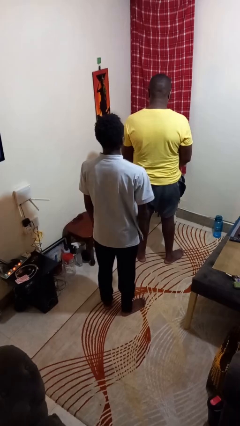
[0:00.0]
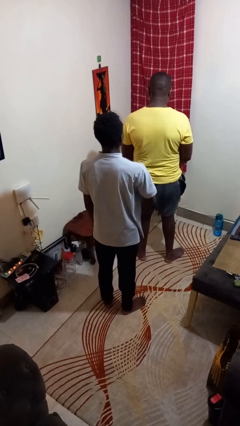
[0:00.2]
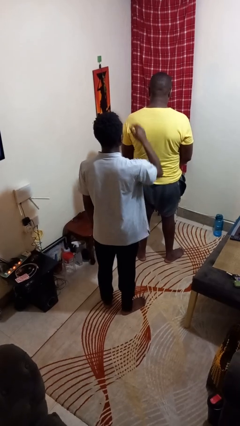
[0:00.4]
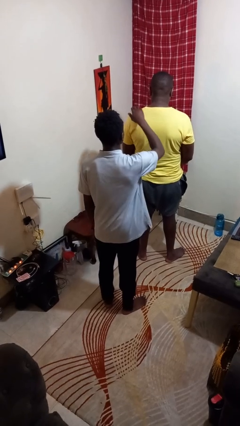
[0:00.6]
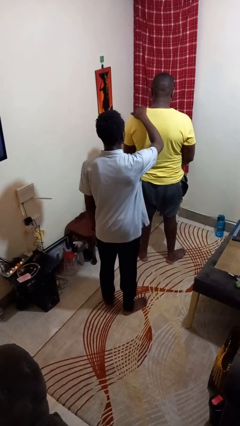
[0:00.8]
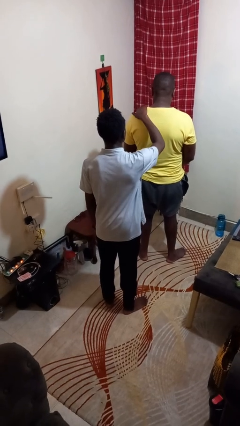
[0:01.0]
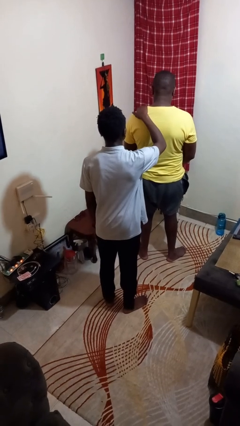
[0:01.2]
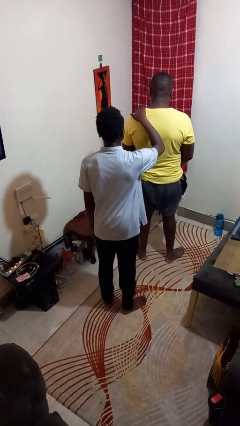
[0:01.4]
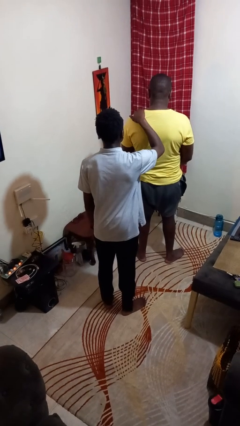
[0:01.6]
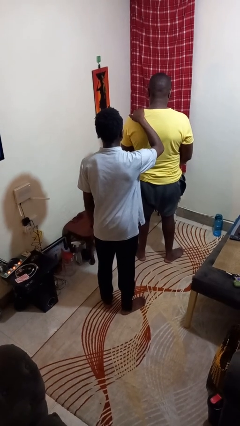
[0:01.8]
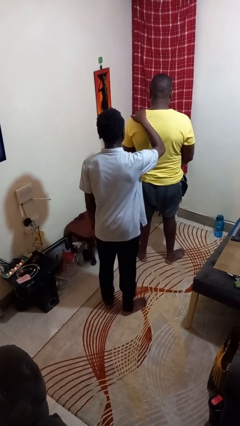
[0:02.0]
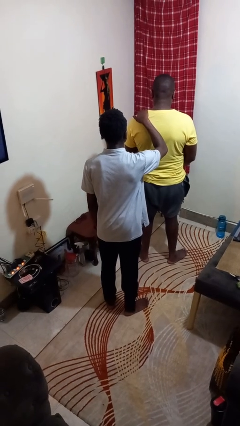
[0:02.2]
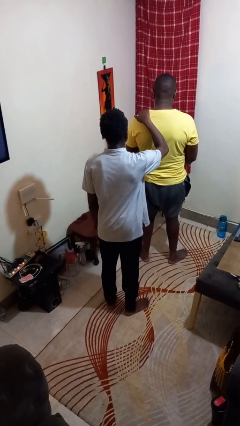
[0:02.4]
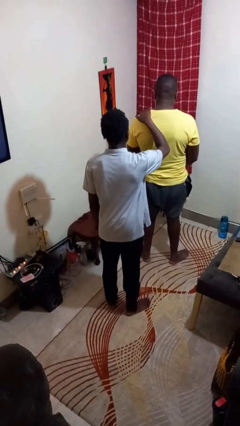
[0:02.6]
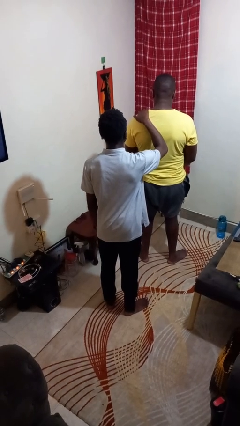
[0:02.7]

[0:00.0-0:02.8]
person touches back of person

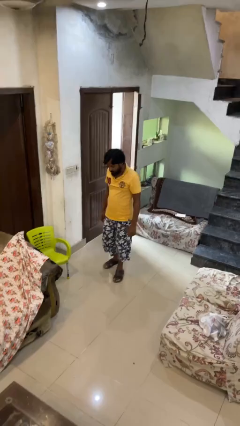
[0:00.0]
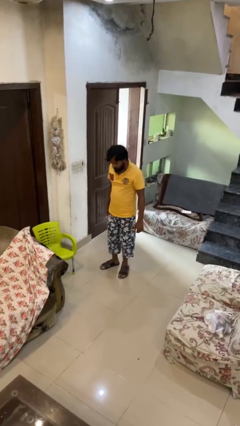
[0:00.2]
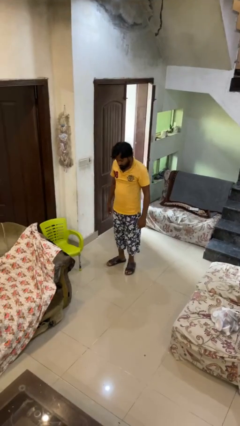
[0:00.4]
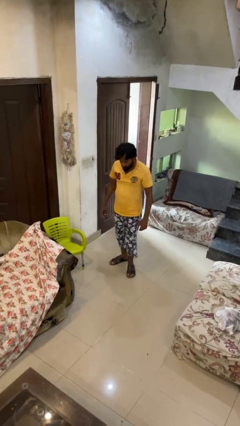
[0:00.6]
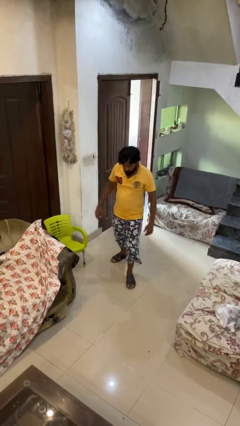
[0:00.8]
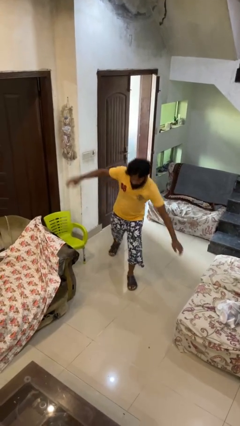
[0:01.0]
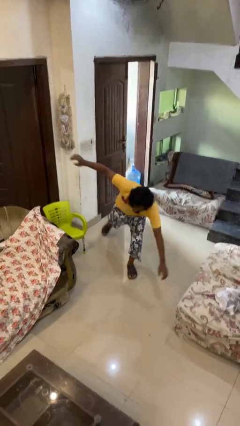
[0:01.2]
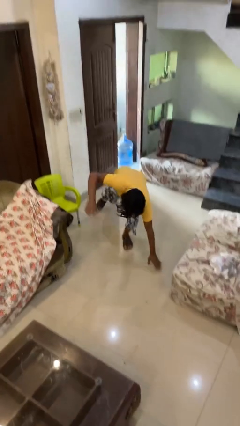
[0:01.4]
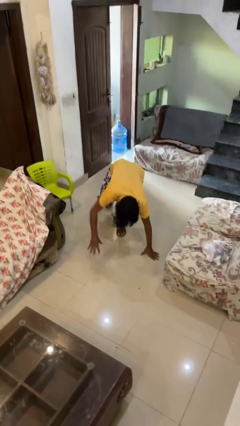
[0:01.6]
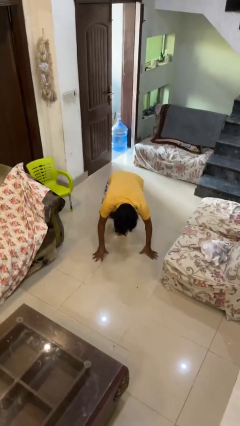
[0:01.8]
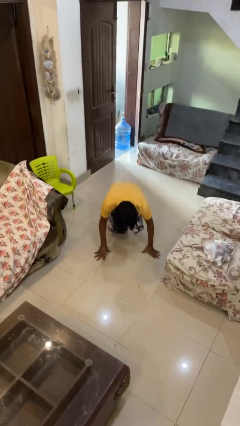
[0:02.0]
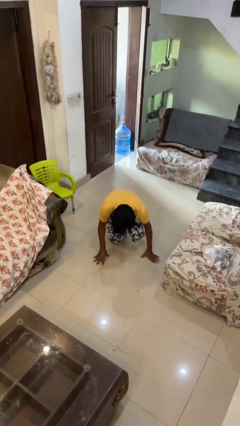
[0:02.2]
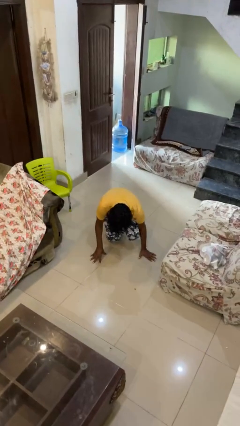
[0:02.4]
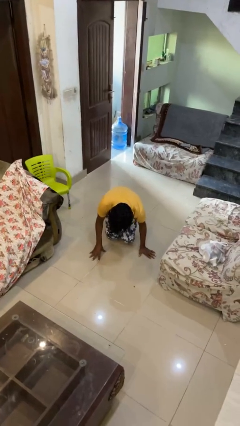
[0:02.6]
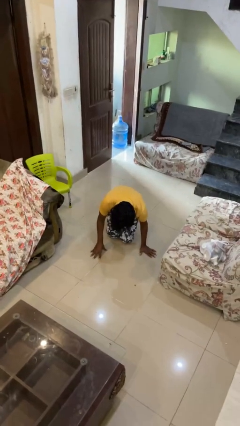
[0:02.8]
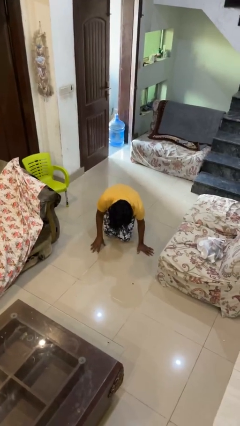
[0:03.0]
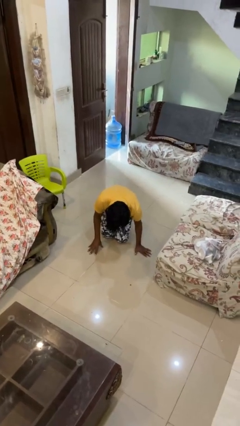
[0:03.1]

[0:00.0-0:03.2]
person trips on object on floor

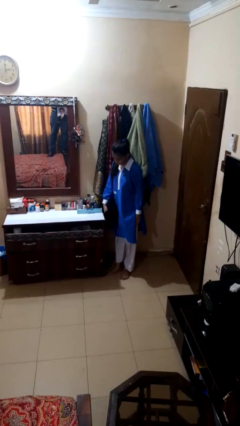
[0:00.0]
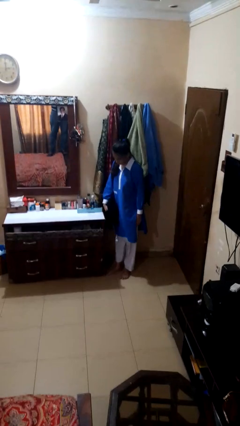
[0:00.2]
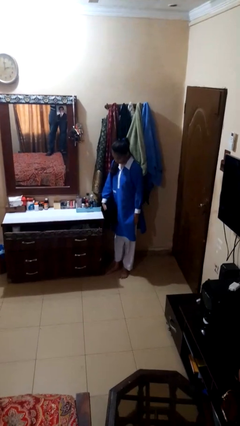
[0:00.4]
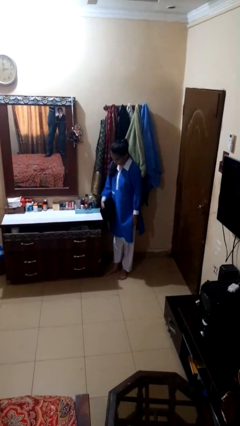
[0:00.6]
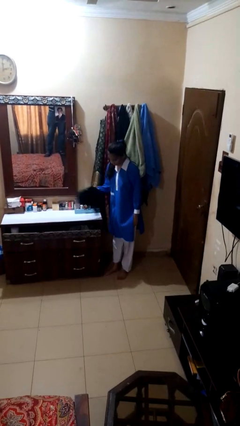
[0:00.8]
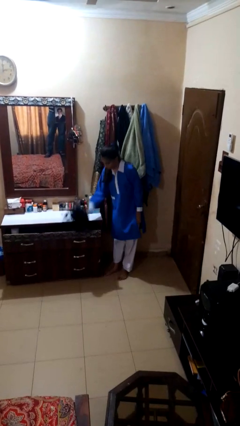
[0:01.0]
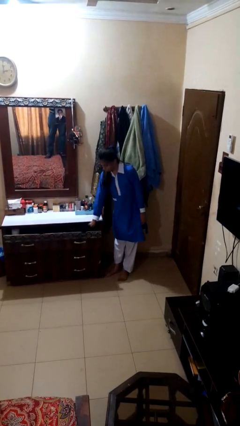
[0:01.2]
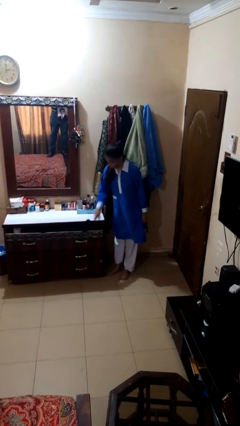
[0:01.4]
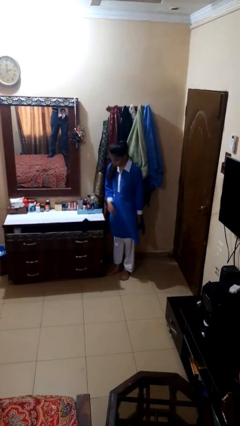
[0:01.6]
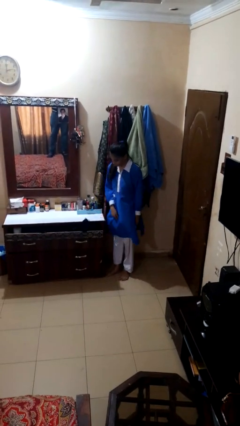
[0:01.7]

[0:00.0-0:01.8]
person puts clothes into dresser

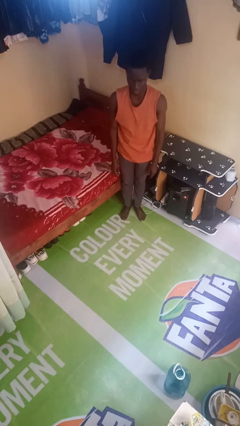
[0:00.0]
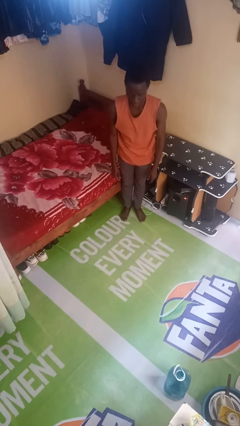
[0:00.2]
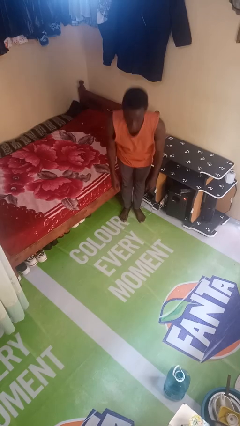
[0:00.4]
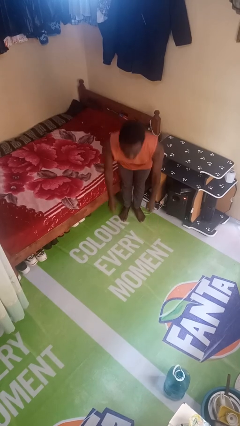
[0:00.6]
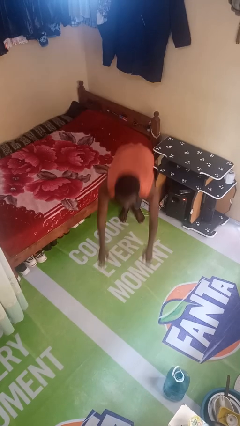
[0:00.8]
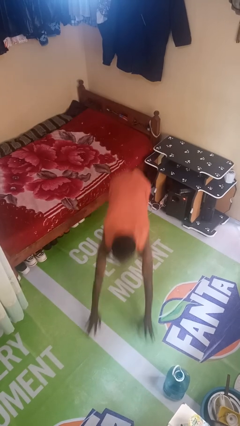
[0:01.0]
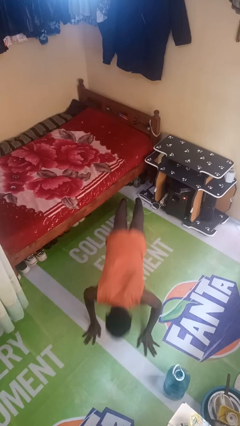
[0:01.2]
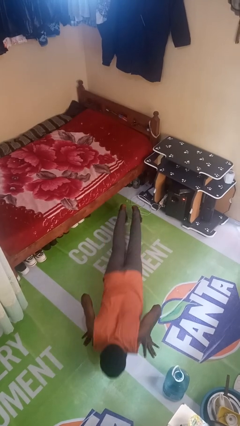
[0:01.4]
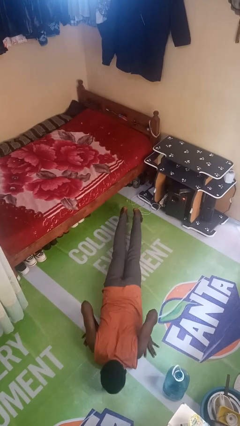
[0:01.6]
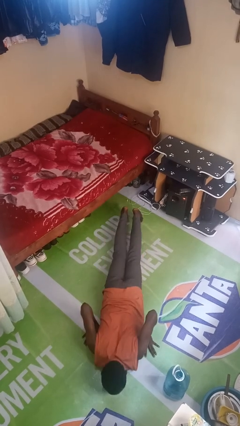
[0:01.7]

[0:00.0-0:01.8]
person falls while standing

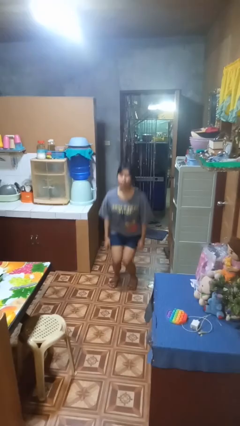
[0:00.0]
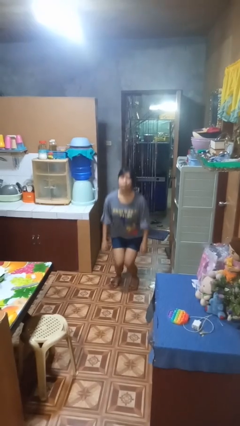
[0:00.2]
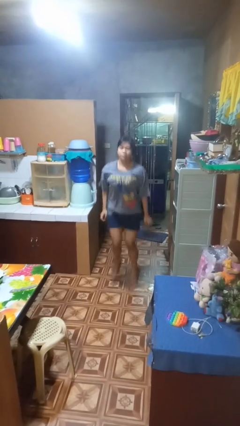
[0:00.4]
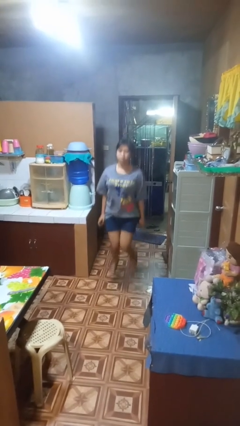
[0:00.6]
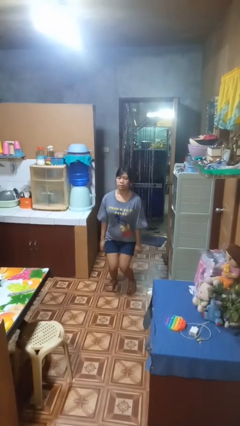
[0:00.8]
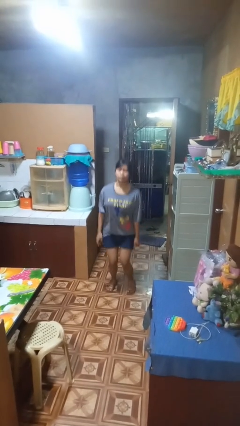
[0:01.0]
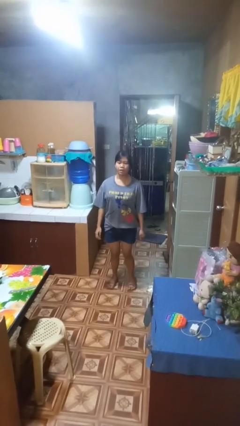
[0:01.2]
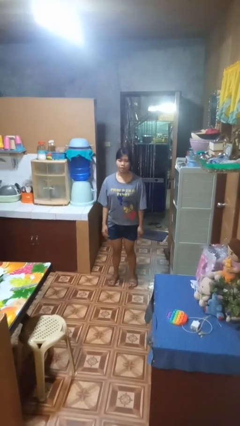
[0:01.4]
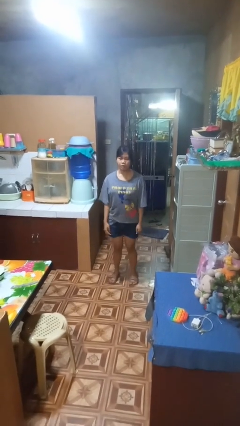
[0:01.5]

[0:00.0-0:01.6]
person jumps

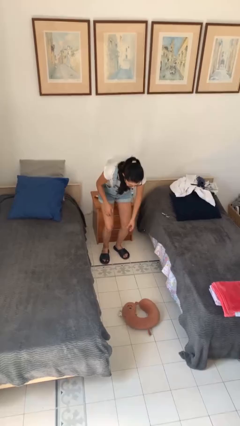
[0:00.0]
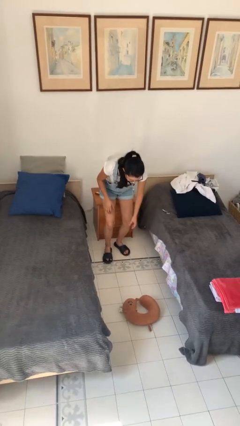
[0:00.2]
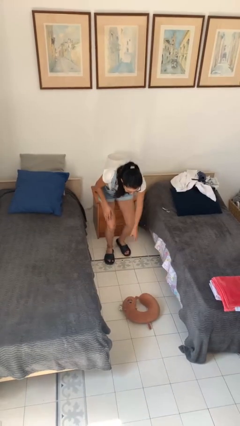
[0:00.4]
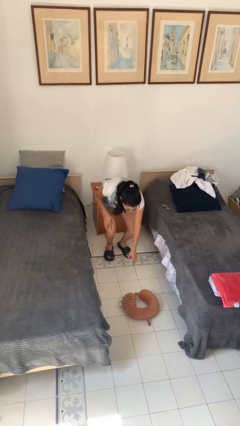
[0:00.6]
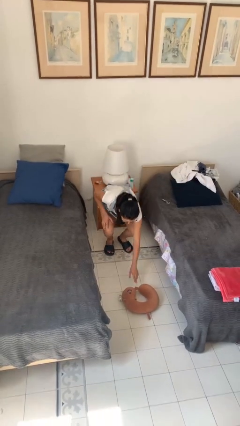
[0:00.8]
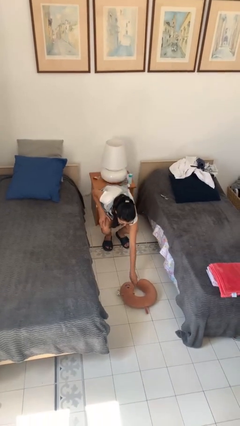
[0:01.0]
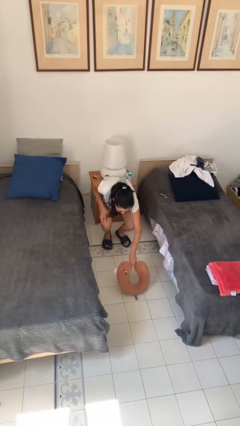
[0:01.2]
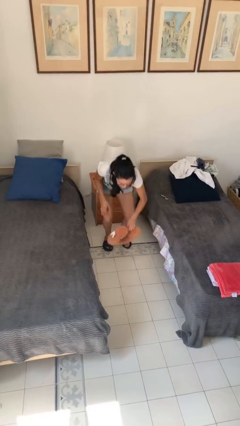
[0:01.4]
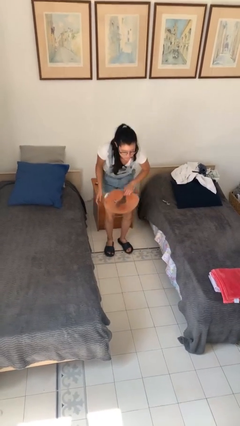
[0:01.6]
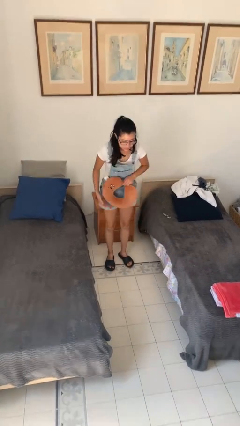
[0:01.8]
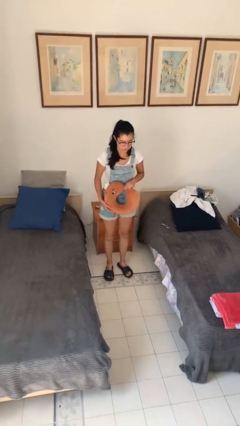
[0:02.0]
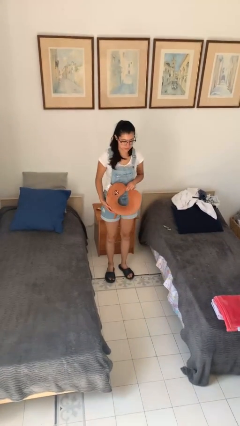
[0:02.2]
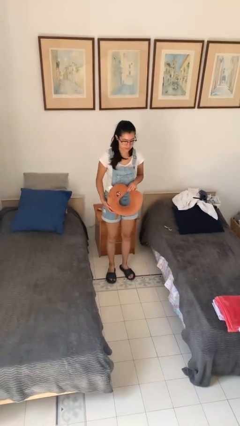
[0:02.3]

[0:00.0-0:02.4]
person picks up object from floor

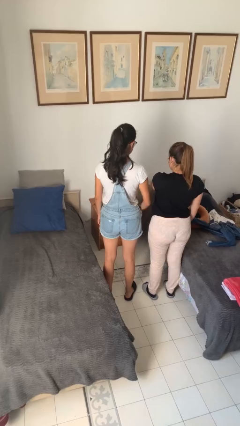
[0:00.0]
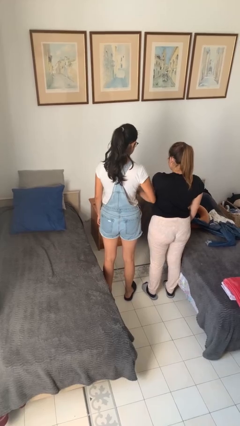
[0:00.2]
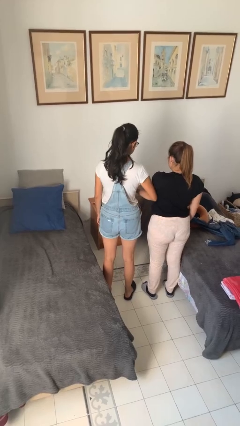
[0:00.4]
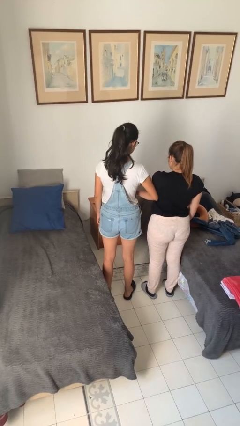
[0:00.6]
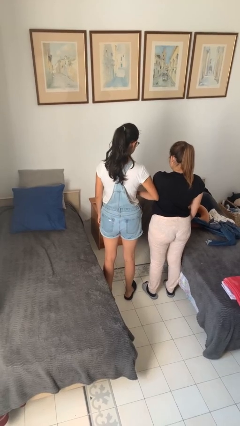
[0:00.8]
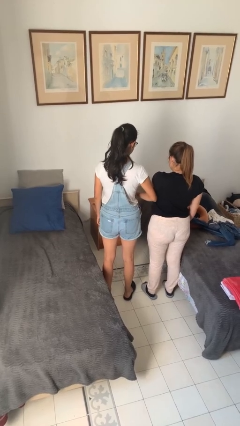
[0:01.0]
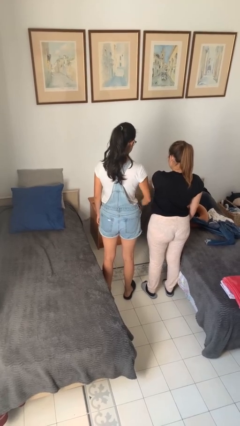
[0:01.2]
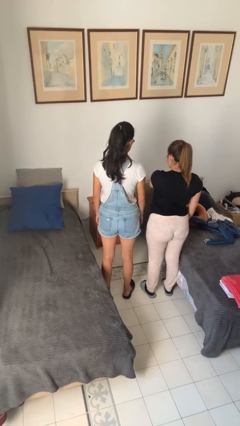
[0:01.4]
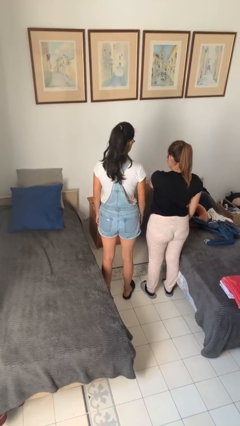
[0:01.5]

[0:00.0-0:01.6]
person nudges person with elbow

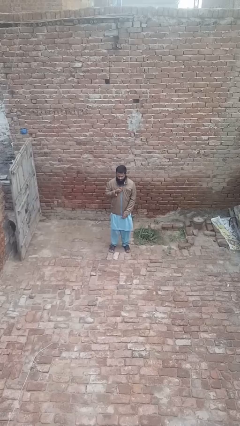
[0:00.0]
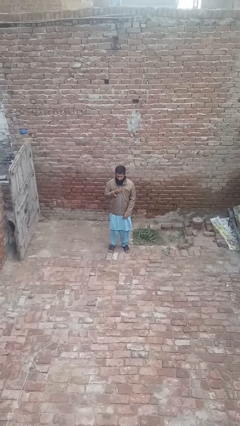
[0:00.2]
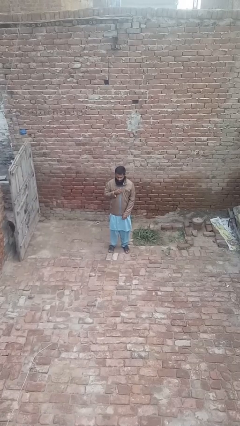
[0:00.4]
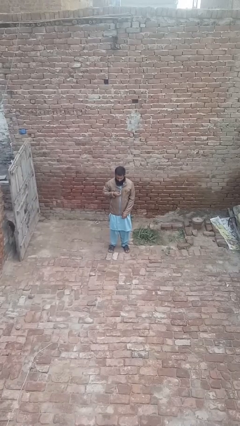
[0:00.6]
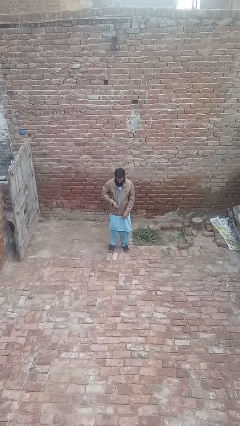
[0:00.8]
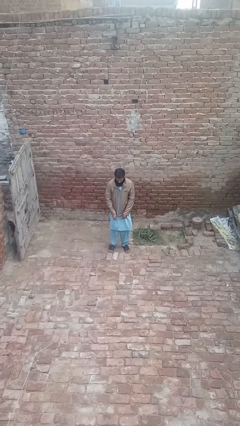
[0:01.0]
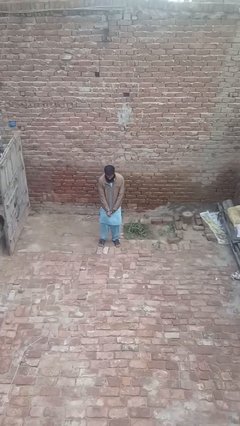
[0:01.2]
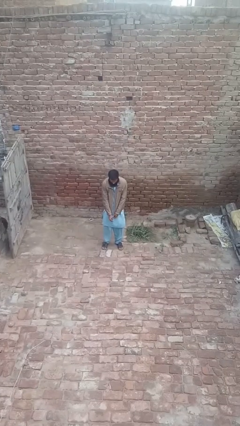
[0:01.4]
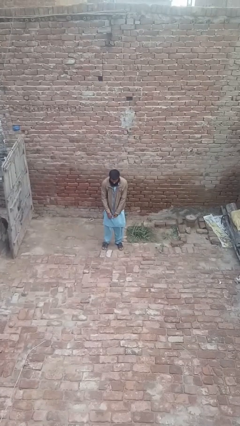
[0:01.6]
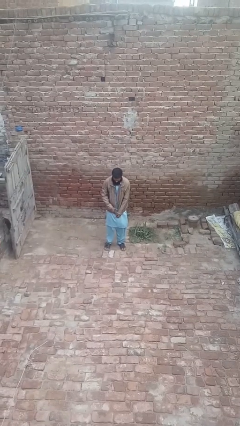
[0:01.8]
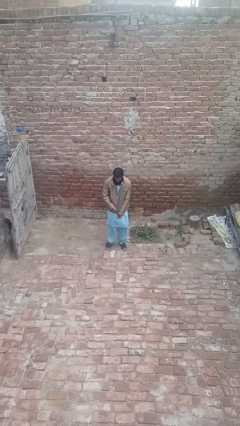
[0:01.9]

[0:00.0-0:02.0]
person unzips jacket

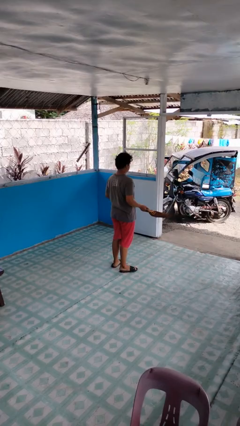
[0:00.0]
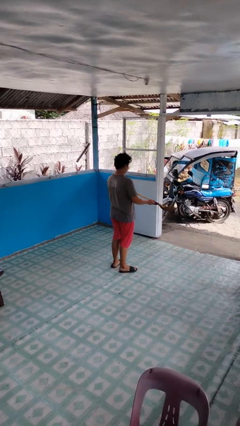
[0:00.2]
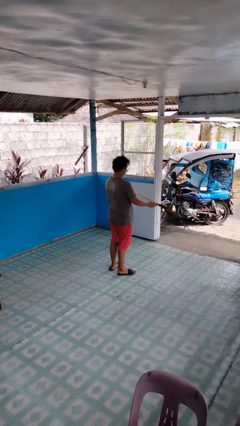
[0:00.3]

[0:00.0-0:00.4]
person throws object to ground
